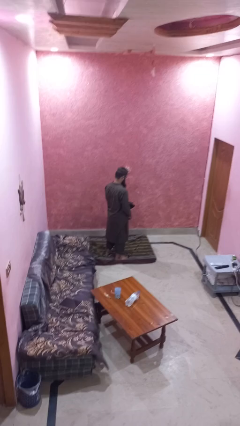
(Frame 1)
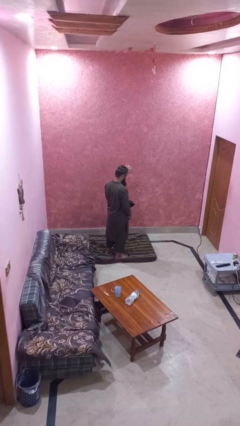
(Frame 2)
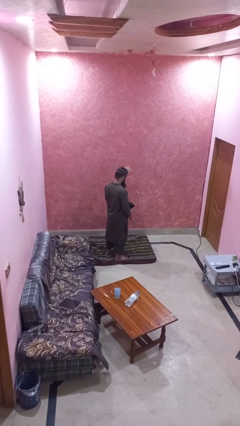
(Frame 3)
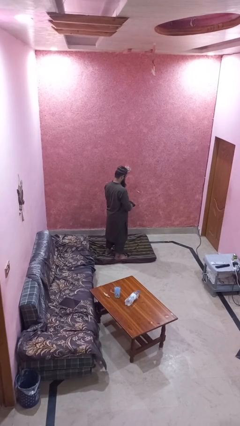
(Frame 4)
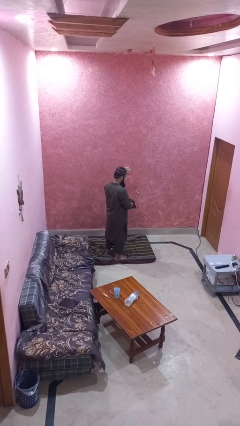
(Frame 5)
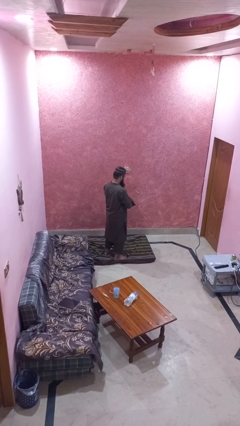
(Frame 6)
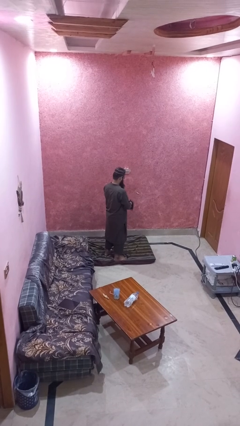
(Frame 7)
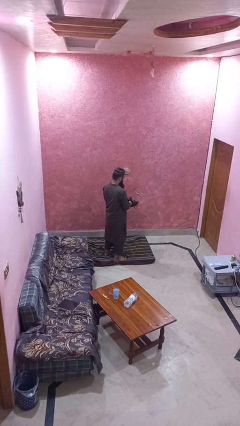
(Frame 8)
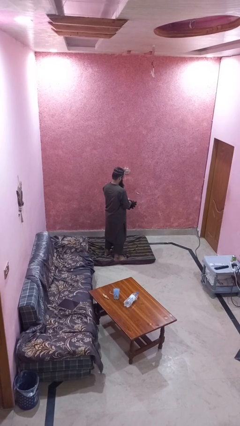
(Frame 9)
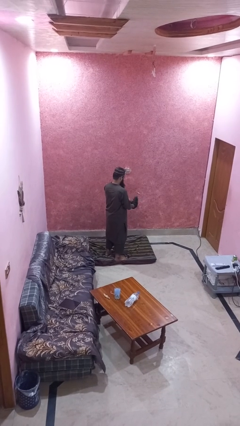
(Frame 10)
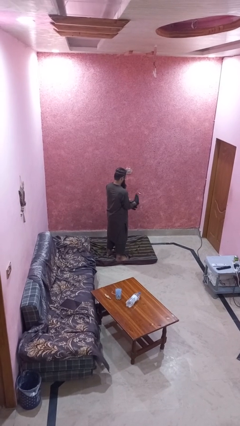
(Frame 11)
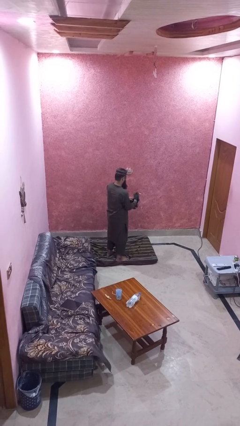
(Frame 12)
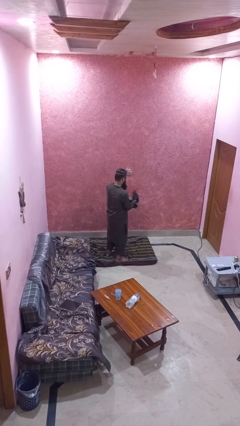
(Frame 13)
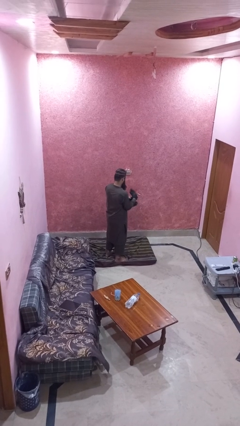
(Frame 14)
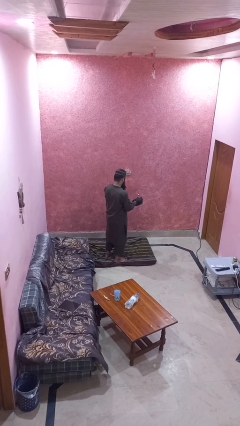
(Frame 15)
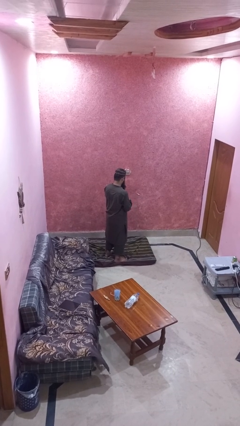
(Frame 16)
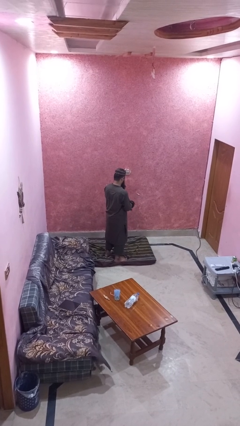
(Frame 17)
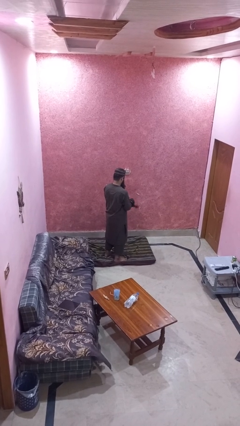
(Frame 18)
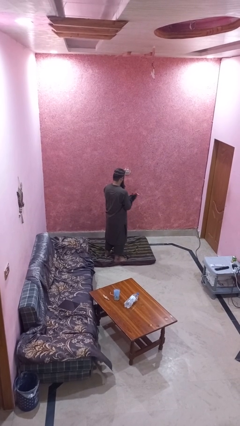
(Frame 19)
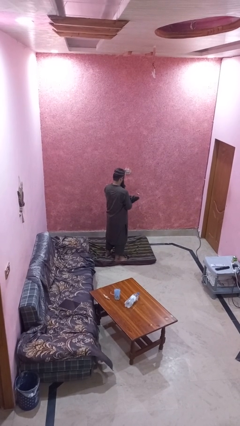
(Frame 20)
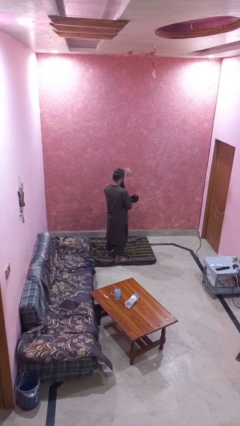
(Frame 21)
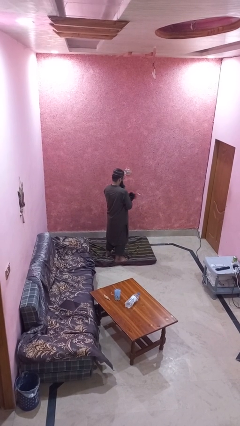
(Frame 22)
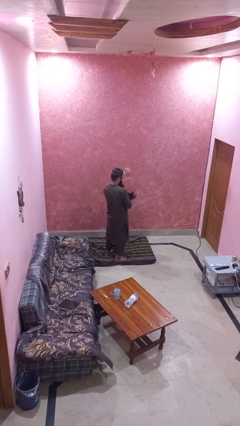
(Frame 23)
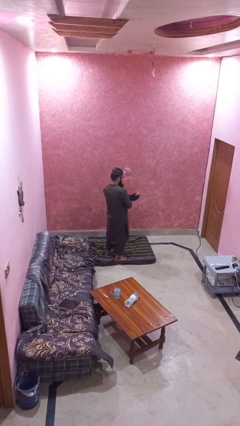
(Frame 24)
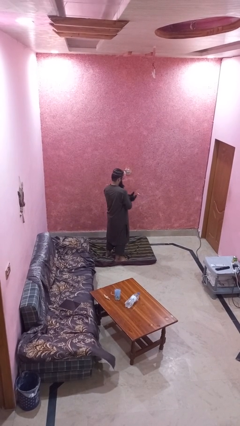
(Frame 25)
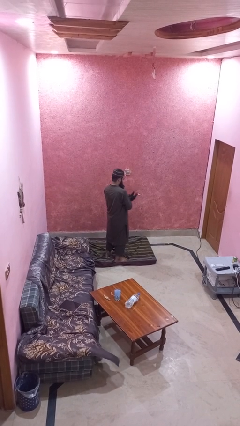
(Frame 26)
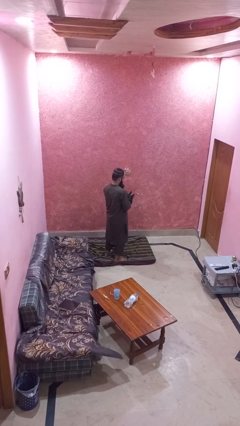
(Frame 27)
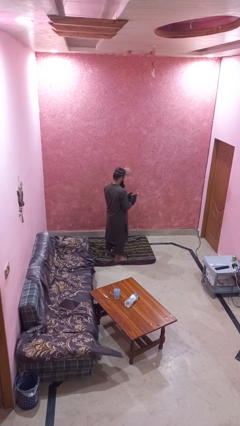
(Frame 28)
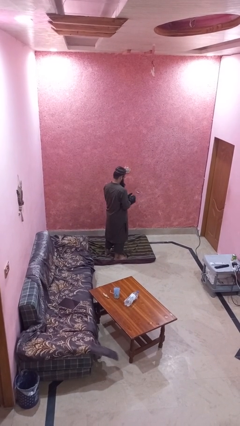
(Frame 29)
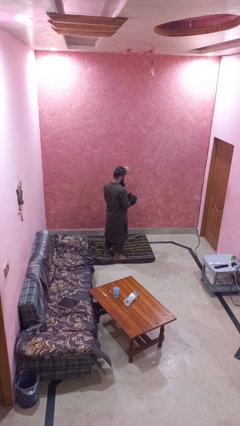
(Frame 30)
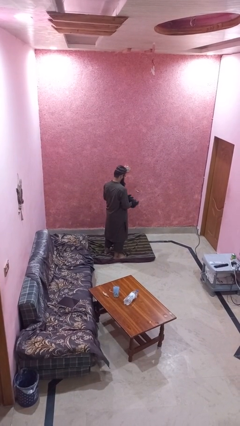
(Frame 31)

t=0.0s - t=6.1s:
person puts on gloves

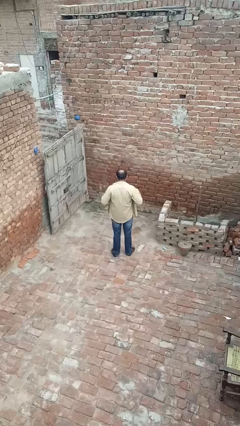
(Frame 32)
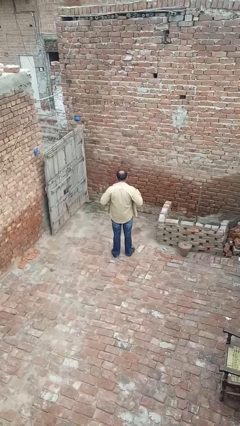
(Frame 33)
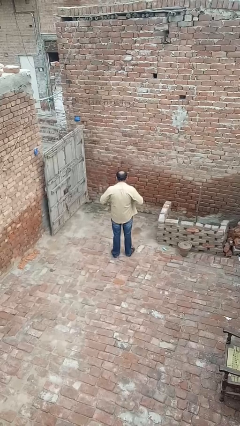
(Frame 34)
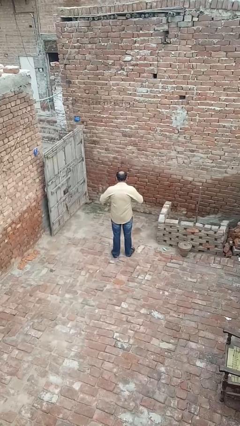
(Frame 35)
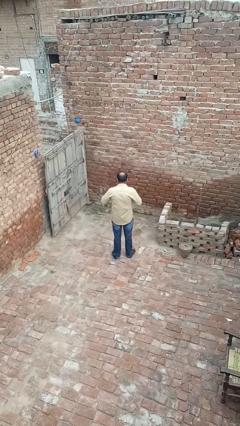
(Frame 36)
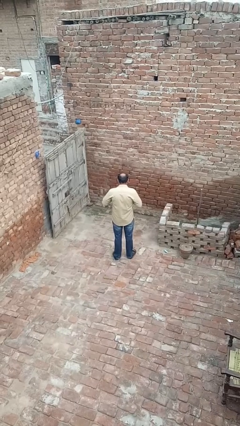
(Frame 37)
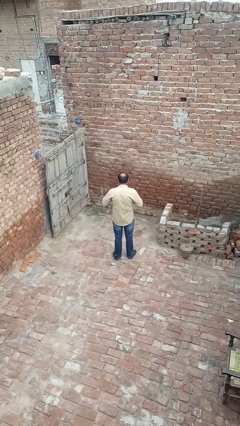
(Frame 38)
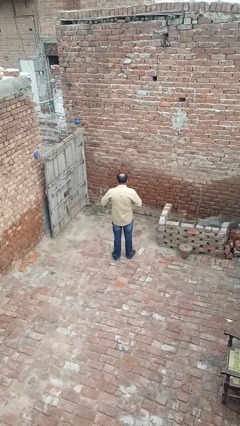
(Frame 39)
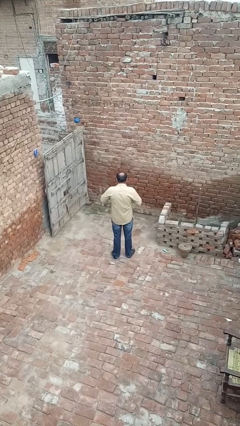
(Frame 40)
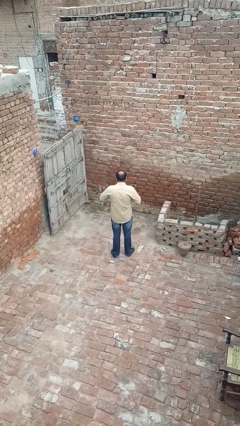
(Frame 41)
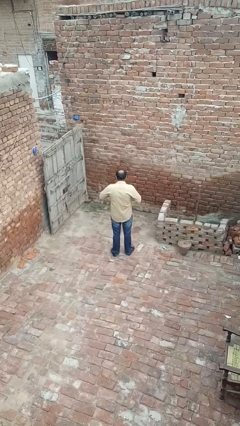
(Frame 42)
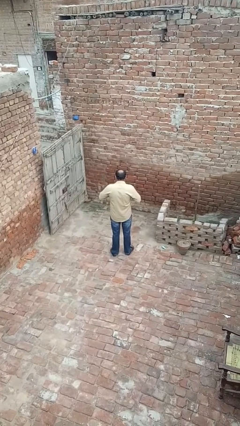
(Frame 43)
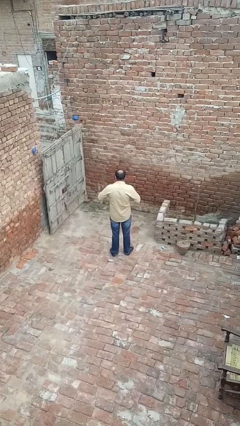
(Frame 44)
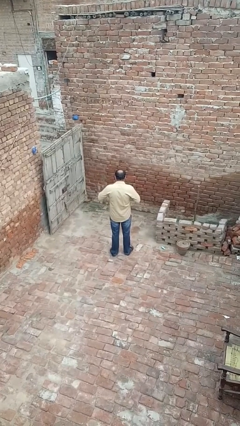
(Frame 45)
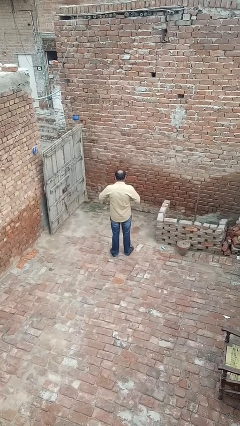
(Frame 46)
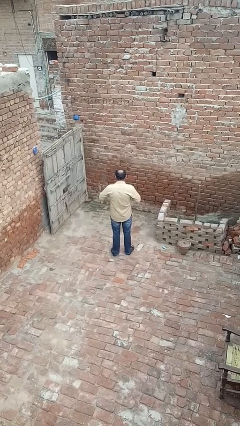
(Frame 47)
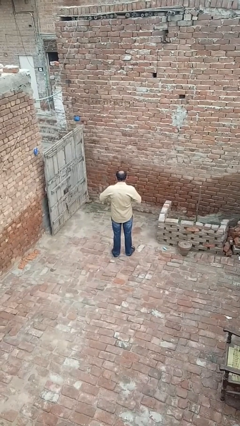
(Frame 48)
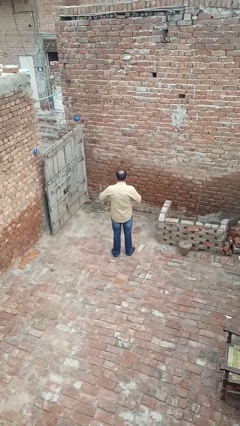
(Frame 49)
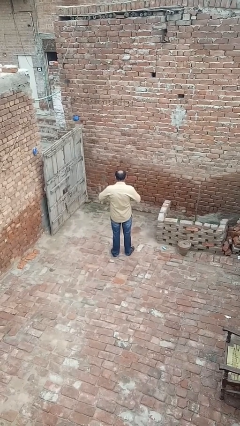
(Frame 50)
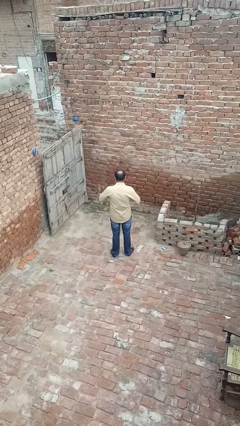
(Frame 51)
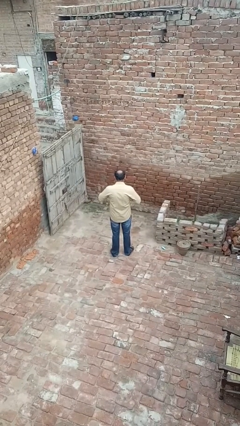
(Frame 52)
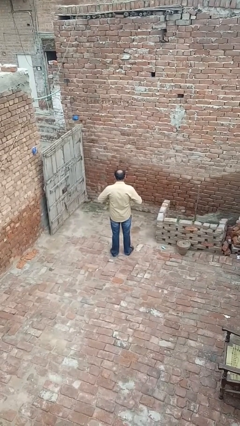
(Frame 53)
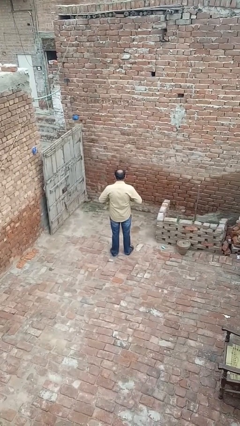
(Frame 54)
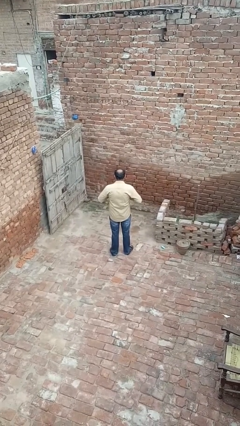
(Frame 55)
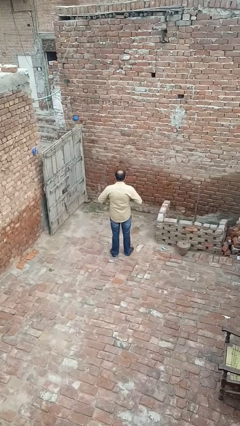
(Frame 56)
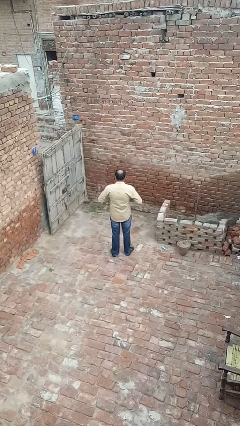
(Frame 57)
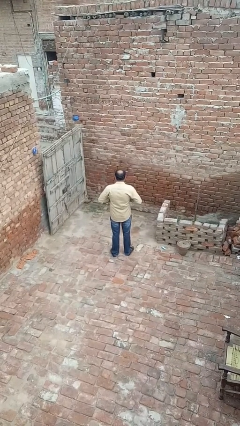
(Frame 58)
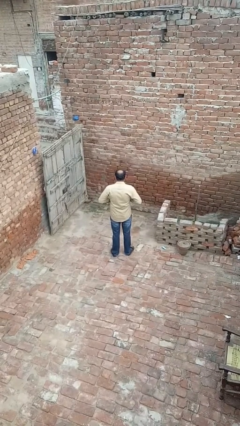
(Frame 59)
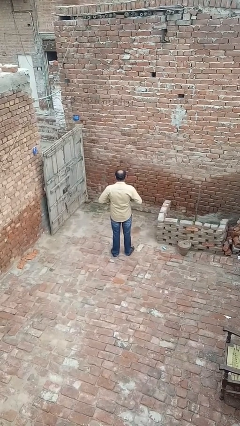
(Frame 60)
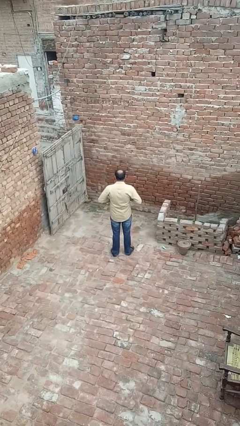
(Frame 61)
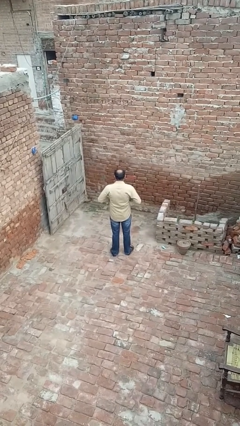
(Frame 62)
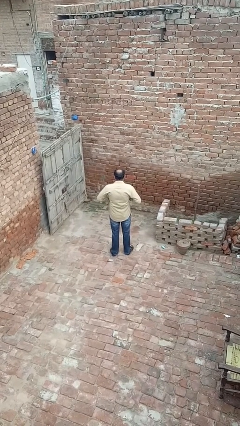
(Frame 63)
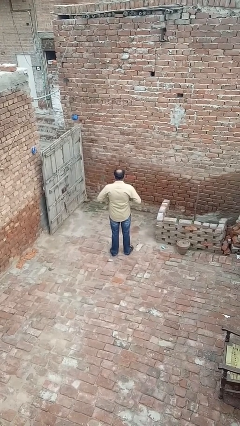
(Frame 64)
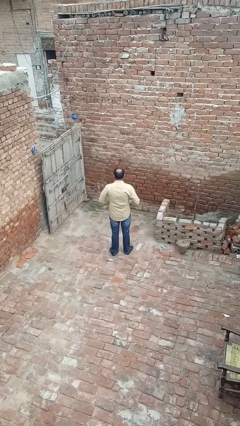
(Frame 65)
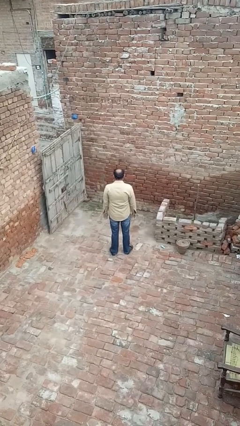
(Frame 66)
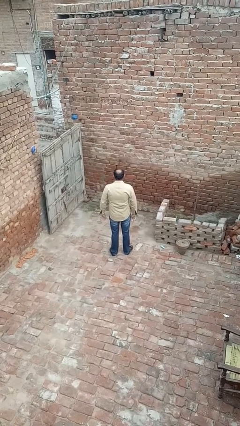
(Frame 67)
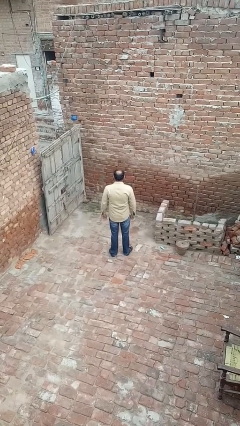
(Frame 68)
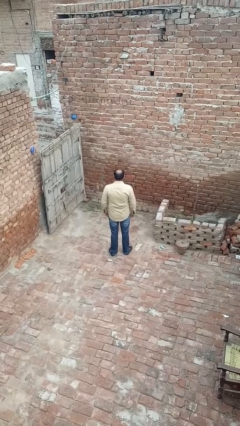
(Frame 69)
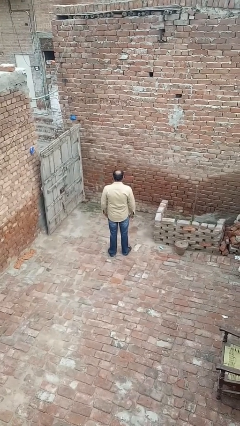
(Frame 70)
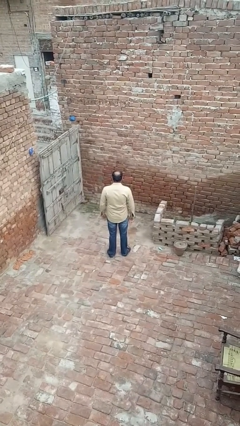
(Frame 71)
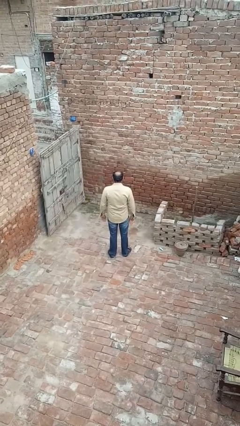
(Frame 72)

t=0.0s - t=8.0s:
person buttons shirt

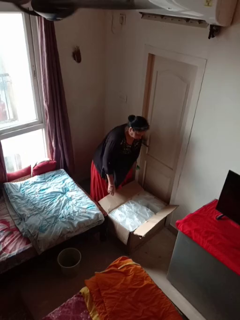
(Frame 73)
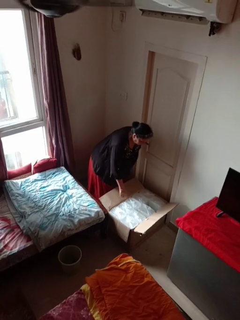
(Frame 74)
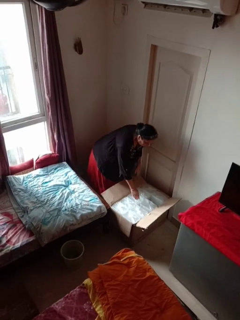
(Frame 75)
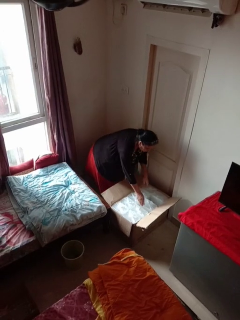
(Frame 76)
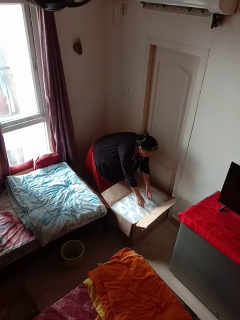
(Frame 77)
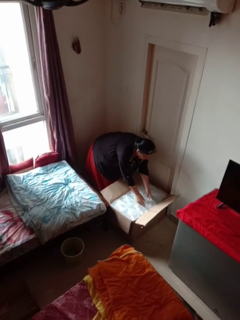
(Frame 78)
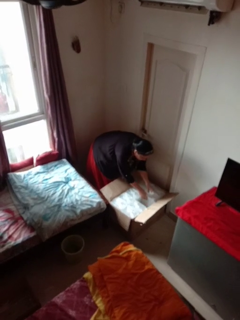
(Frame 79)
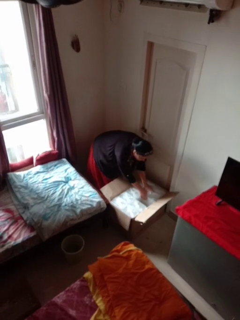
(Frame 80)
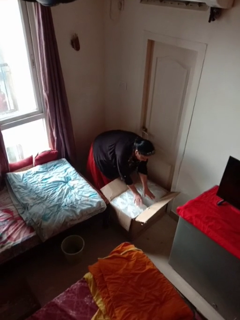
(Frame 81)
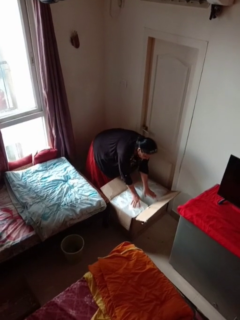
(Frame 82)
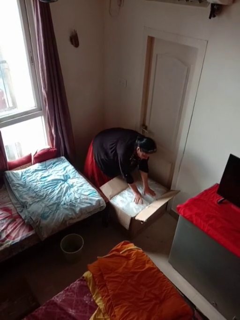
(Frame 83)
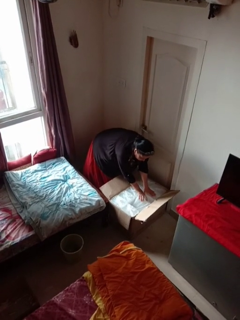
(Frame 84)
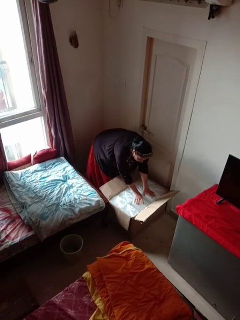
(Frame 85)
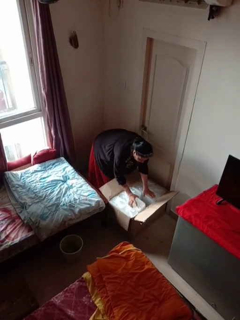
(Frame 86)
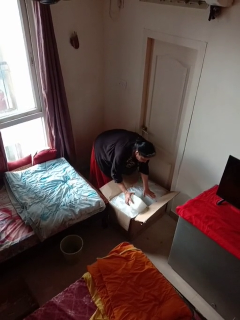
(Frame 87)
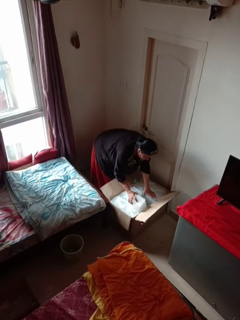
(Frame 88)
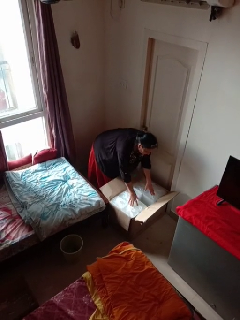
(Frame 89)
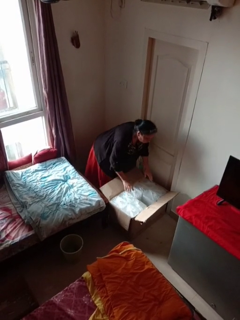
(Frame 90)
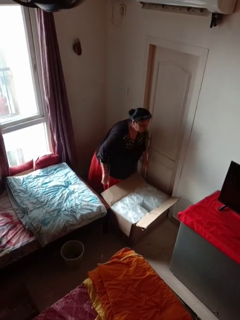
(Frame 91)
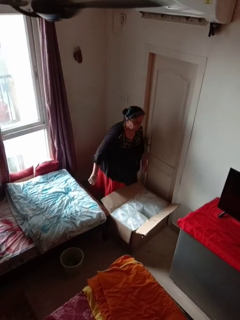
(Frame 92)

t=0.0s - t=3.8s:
person searches in box

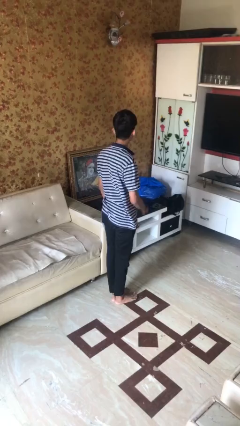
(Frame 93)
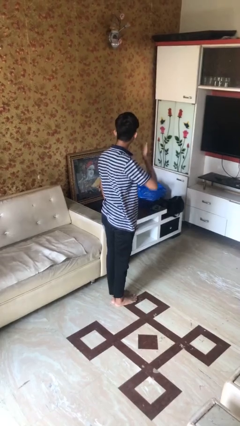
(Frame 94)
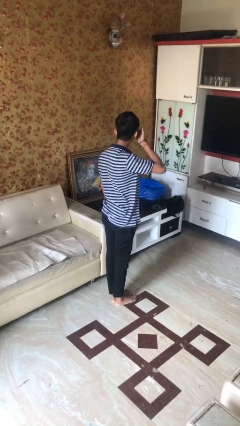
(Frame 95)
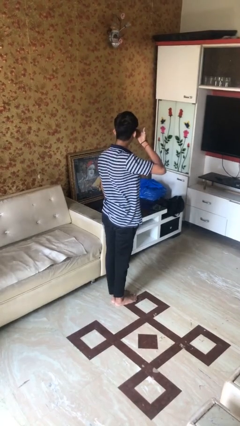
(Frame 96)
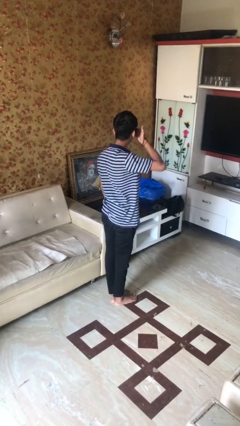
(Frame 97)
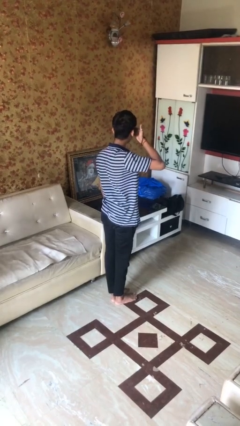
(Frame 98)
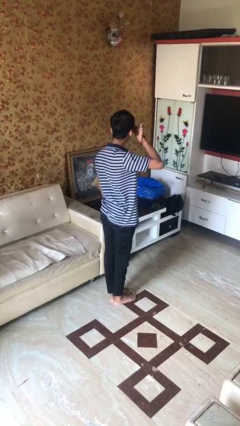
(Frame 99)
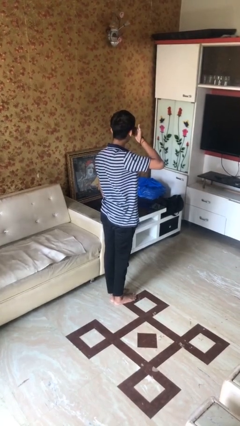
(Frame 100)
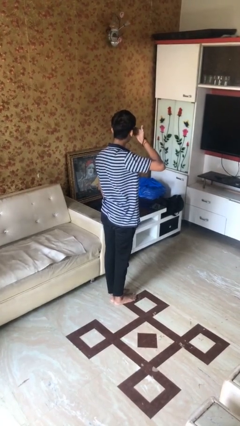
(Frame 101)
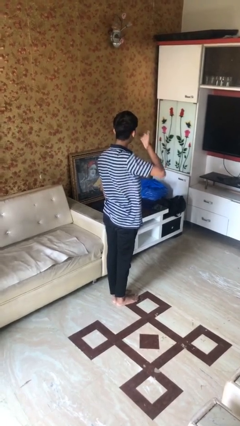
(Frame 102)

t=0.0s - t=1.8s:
person rubs eyes
